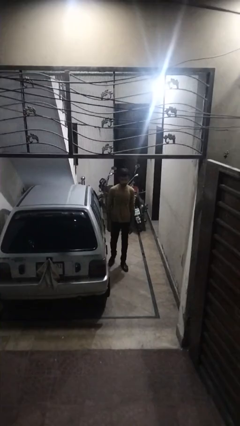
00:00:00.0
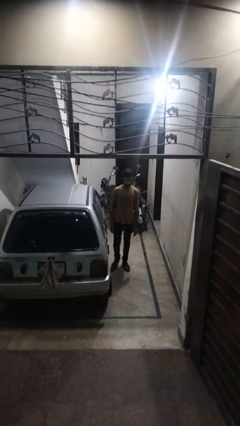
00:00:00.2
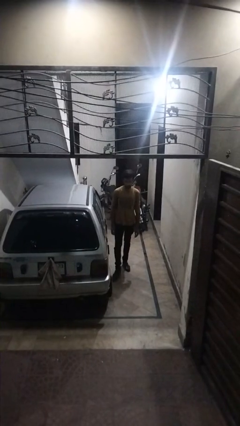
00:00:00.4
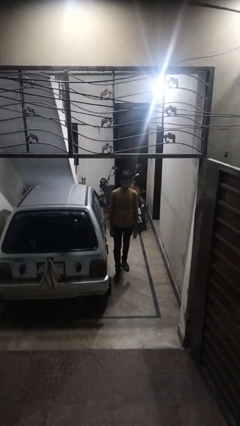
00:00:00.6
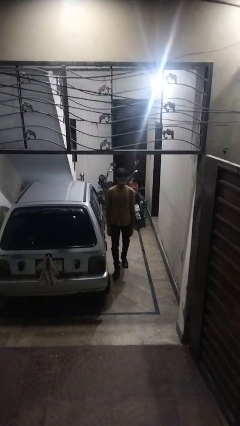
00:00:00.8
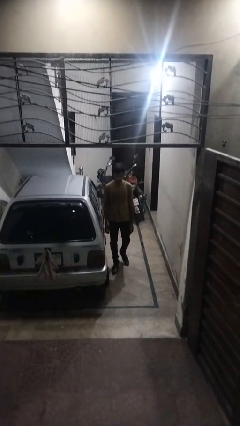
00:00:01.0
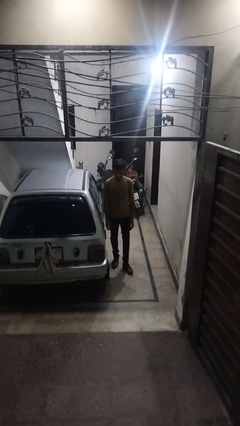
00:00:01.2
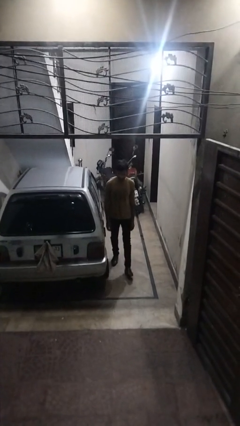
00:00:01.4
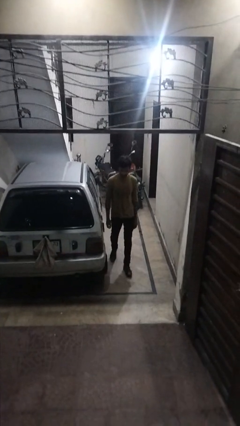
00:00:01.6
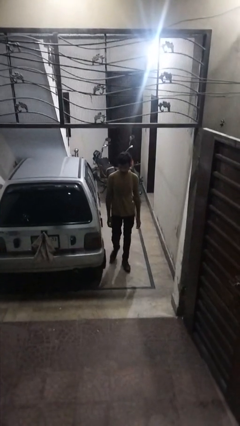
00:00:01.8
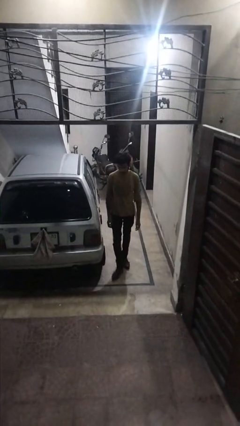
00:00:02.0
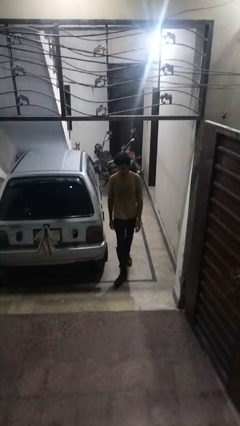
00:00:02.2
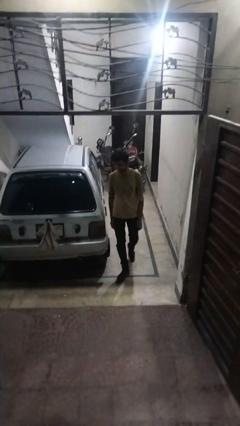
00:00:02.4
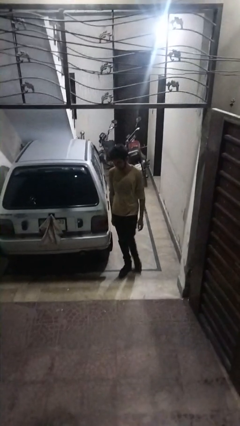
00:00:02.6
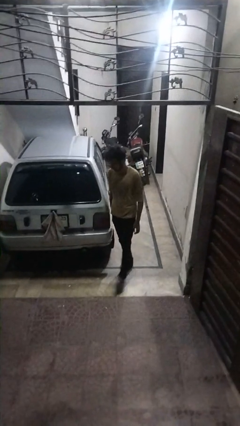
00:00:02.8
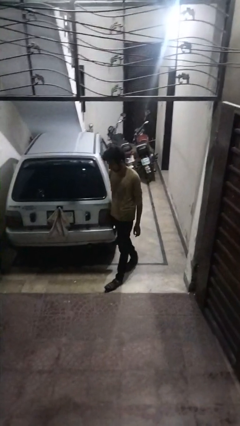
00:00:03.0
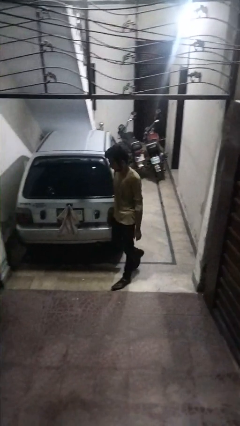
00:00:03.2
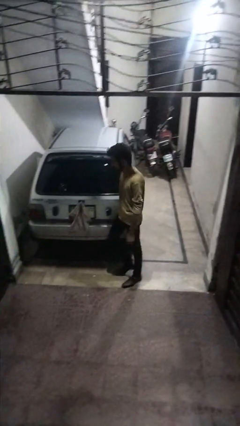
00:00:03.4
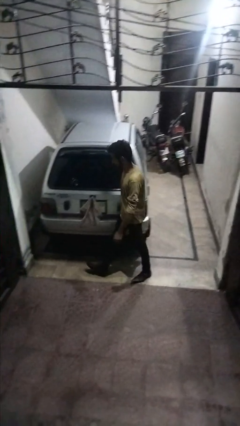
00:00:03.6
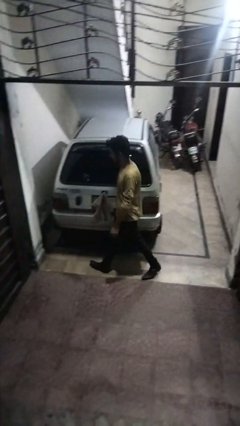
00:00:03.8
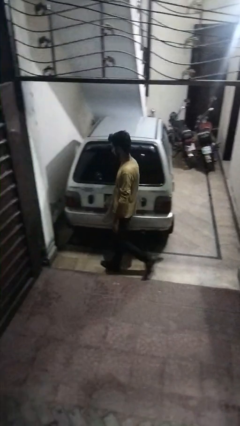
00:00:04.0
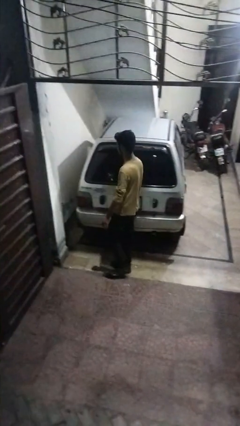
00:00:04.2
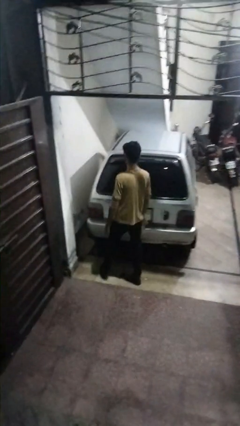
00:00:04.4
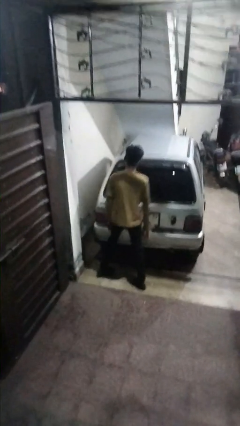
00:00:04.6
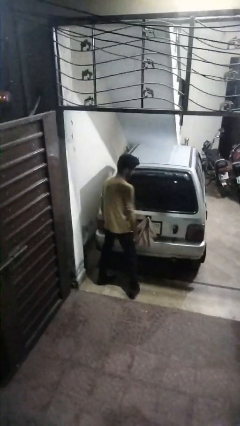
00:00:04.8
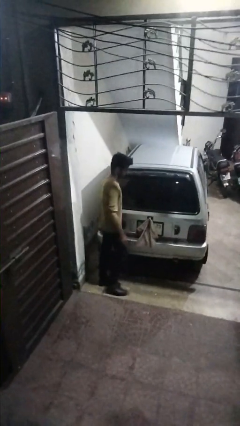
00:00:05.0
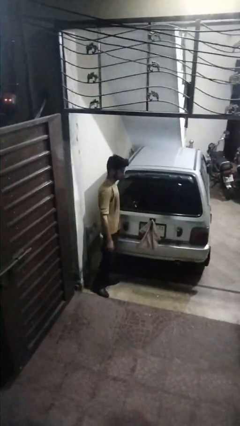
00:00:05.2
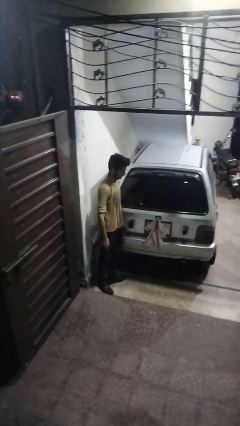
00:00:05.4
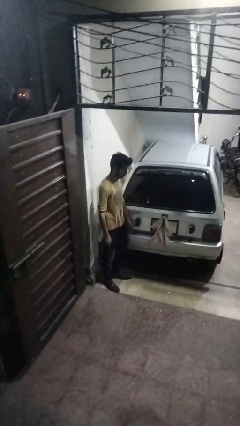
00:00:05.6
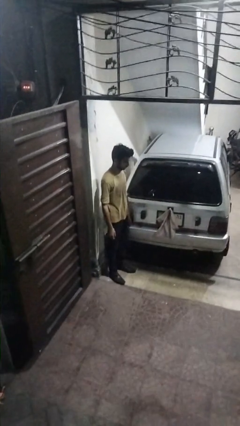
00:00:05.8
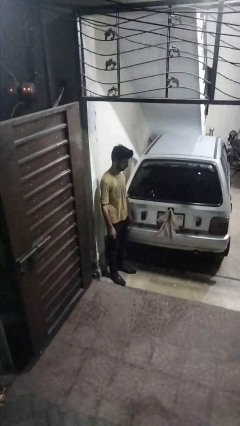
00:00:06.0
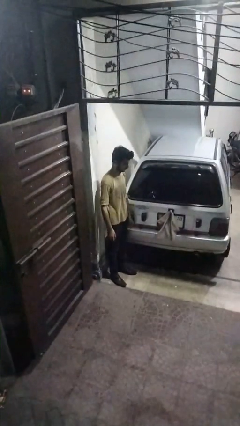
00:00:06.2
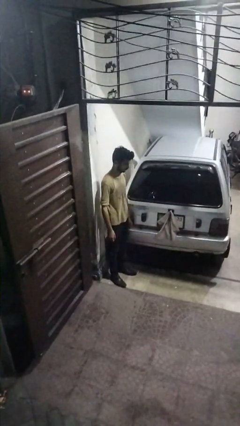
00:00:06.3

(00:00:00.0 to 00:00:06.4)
person walks around car

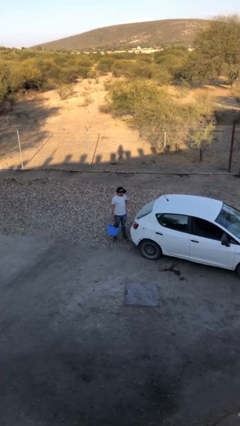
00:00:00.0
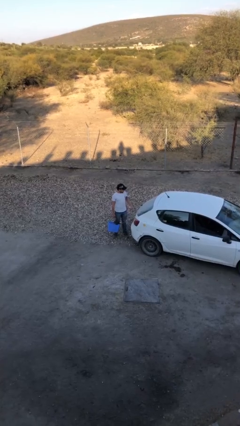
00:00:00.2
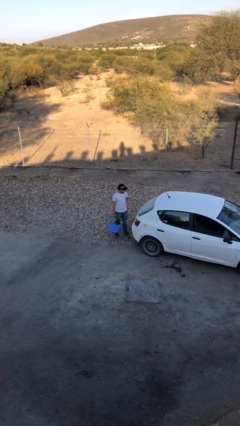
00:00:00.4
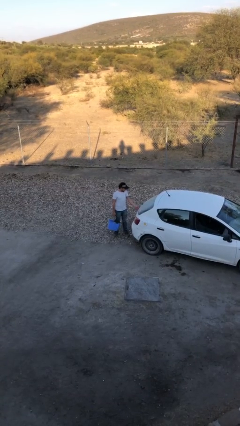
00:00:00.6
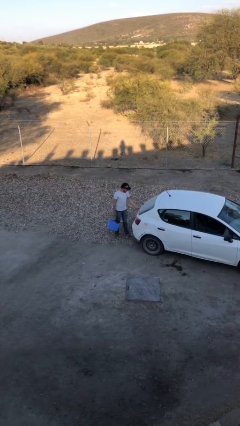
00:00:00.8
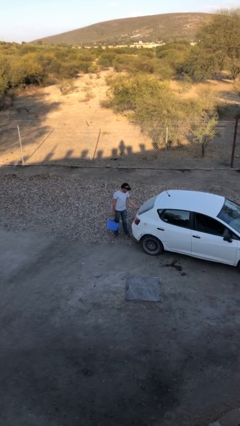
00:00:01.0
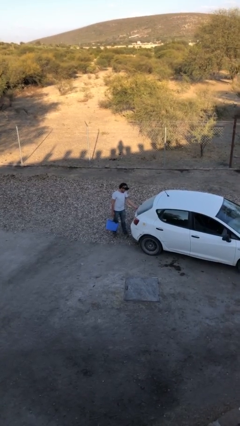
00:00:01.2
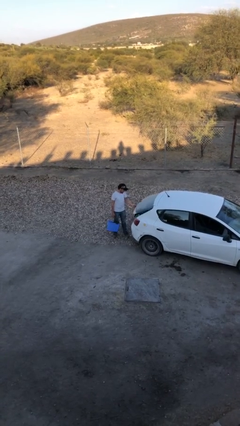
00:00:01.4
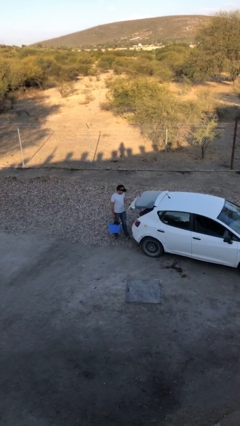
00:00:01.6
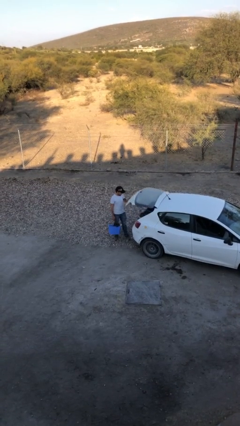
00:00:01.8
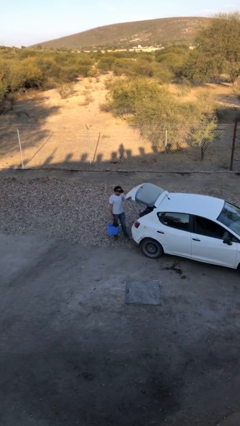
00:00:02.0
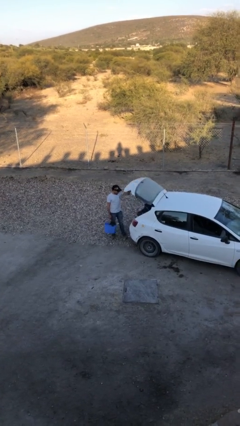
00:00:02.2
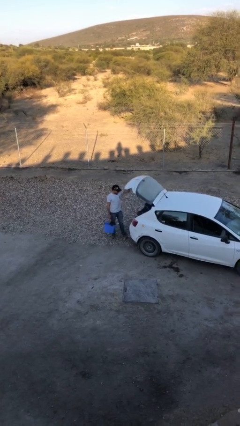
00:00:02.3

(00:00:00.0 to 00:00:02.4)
person opens car trunk

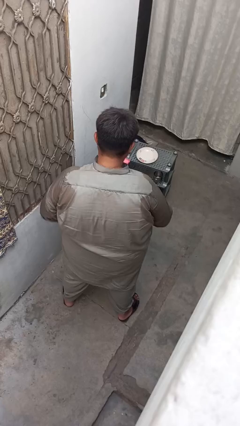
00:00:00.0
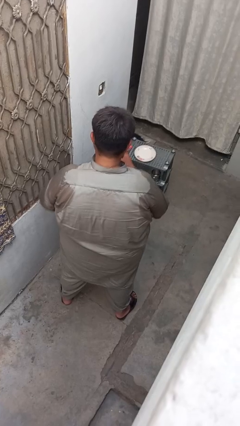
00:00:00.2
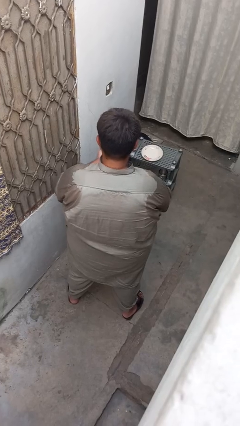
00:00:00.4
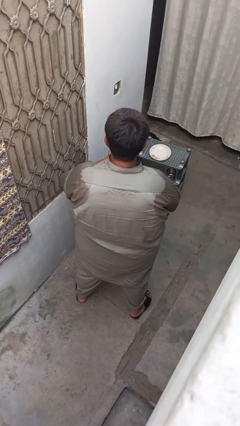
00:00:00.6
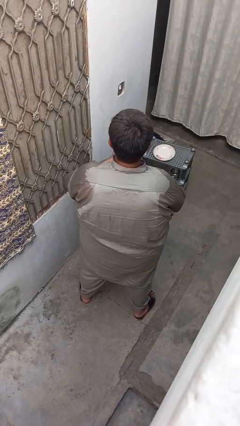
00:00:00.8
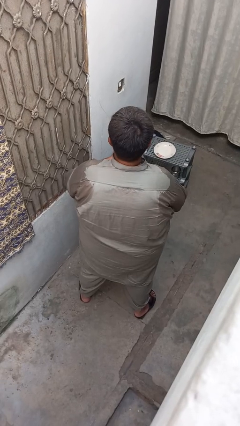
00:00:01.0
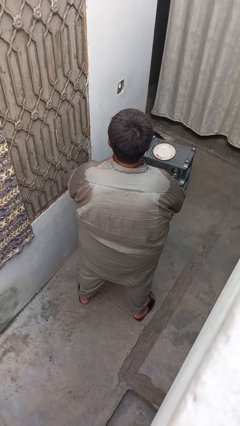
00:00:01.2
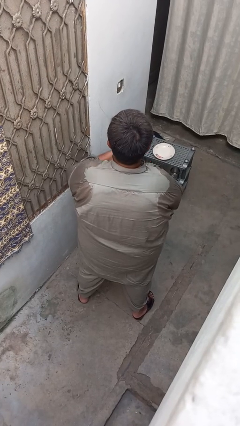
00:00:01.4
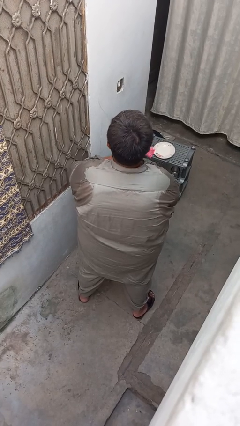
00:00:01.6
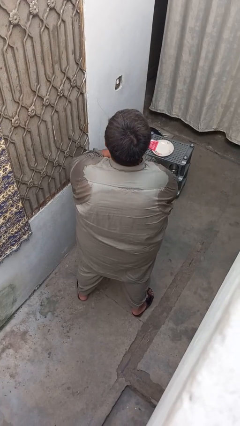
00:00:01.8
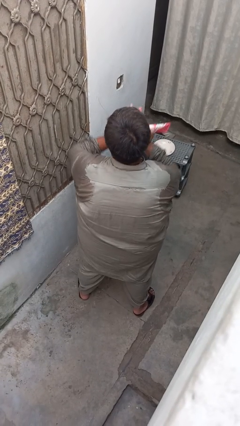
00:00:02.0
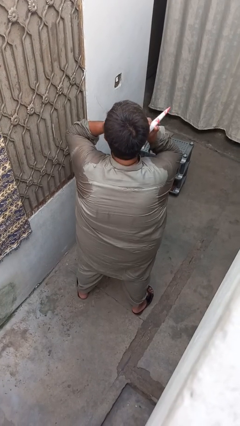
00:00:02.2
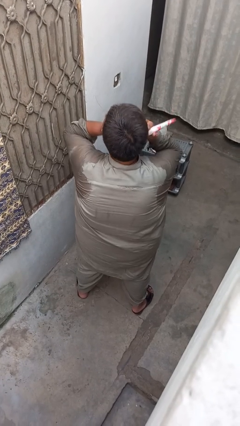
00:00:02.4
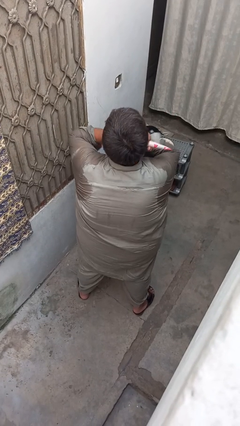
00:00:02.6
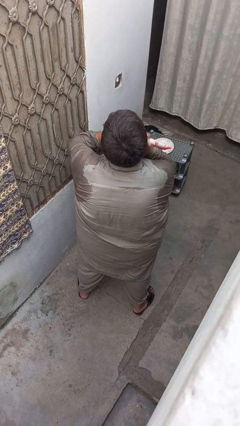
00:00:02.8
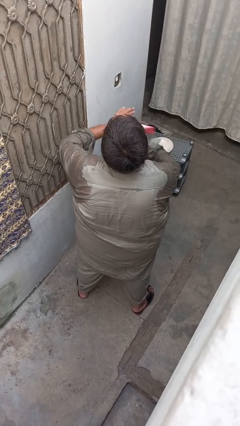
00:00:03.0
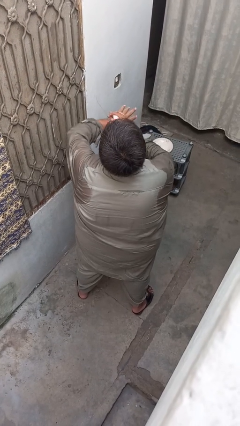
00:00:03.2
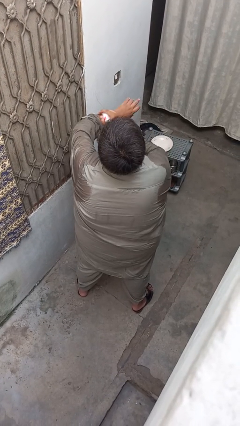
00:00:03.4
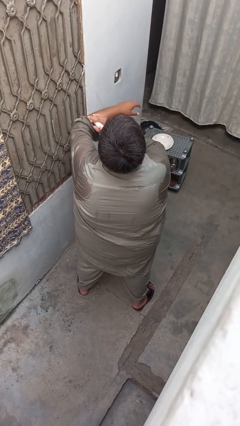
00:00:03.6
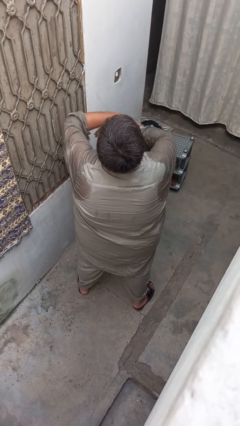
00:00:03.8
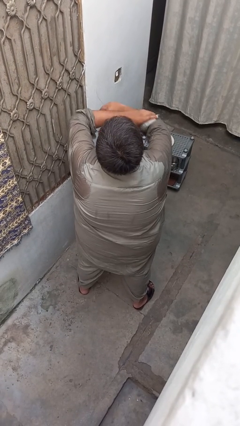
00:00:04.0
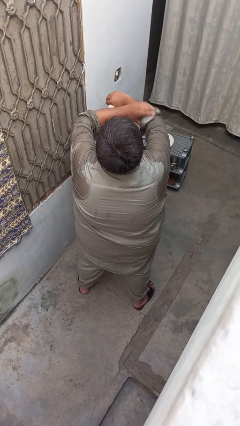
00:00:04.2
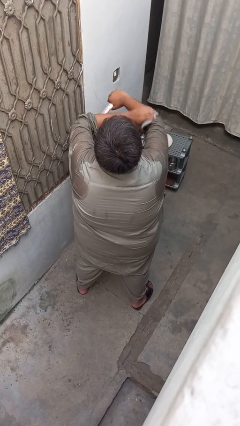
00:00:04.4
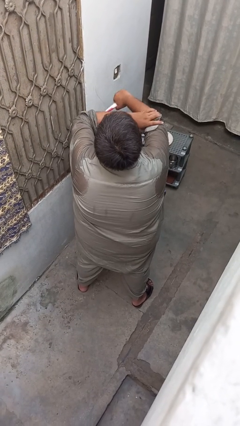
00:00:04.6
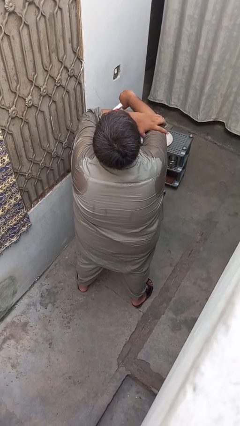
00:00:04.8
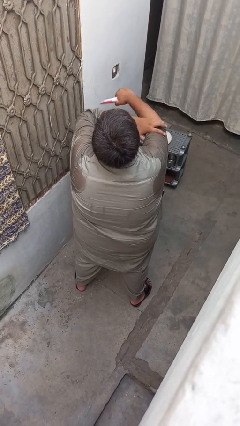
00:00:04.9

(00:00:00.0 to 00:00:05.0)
person applies sunscreen

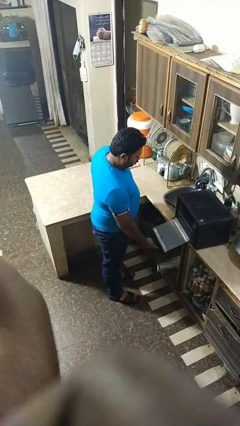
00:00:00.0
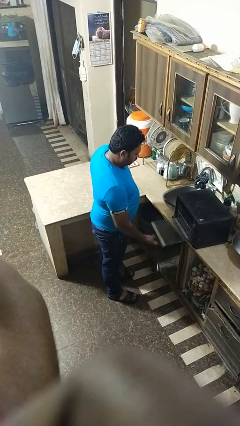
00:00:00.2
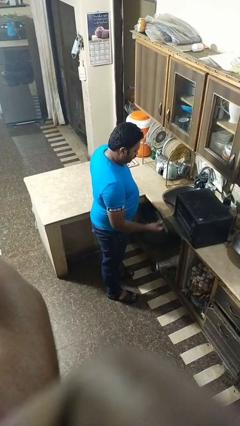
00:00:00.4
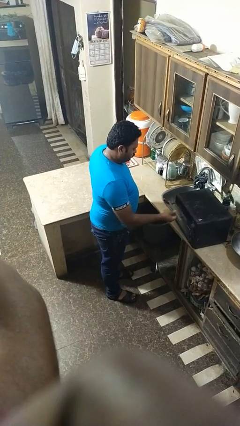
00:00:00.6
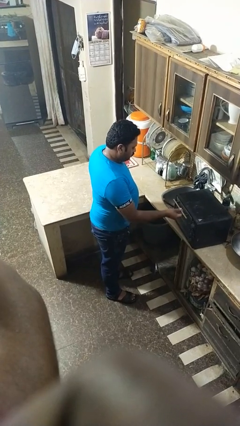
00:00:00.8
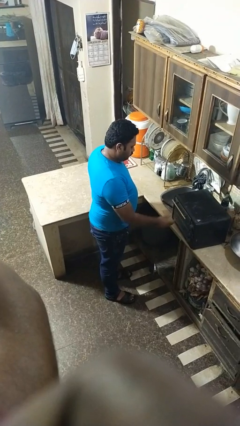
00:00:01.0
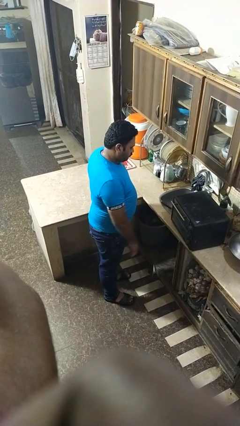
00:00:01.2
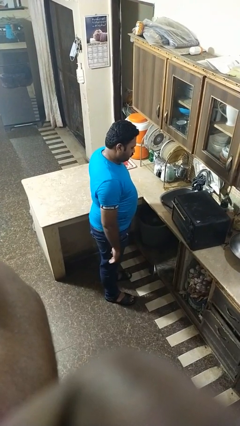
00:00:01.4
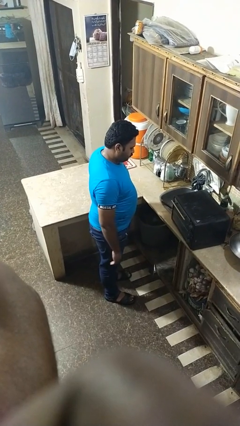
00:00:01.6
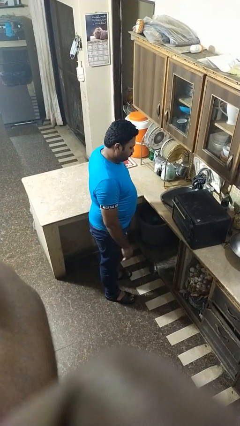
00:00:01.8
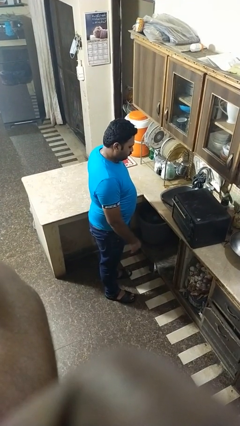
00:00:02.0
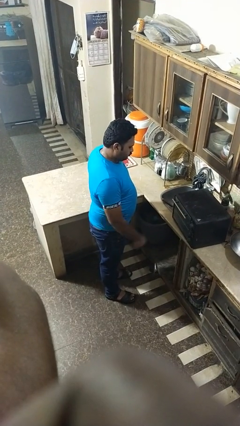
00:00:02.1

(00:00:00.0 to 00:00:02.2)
person closes oven door

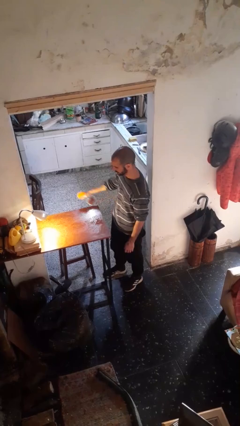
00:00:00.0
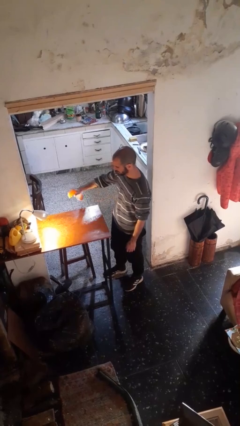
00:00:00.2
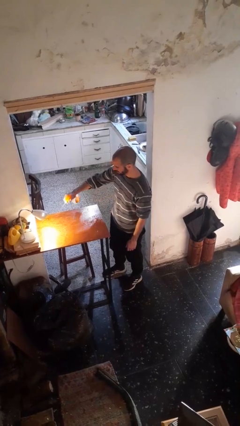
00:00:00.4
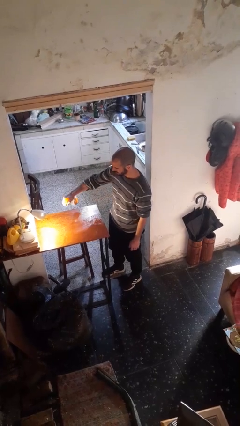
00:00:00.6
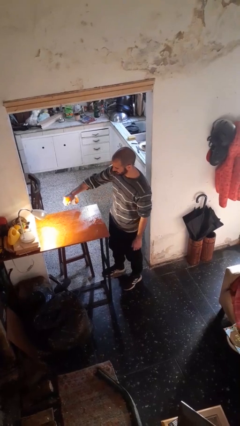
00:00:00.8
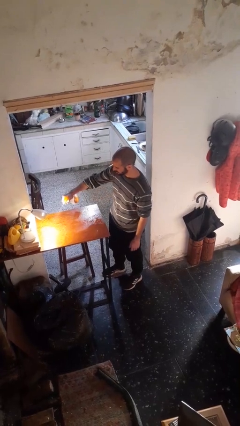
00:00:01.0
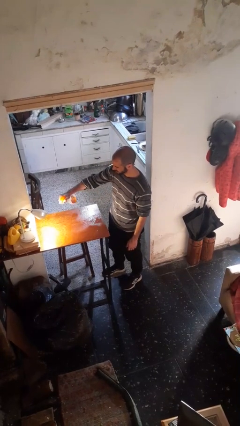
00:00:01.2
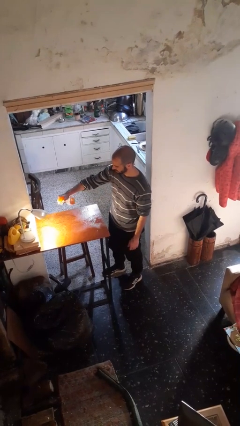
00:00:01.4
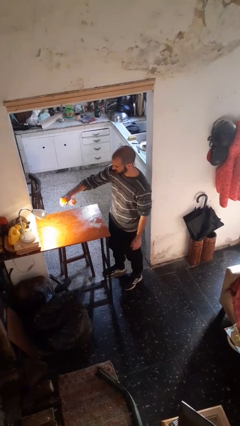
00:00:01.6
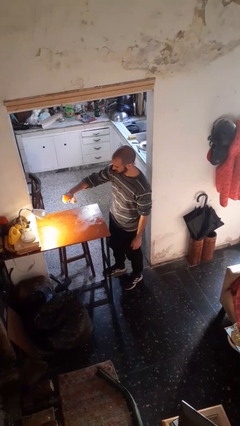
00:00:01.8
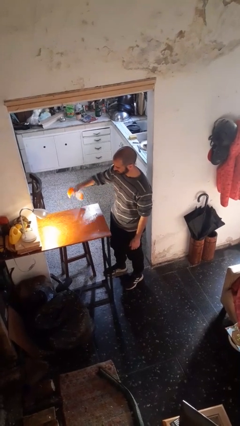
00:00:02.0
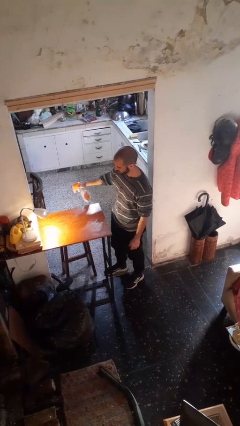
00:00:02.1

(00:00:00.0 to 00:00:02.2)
person sprays from bottle
